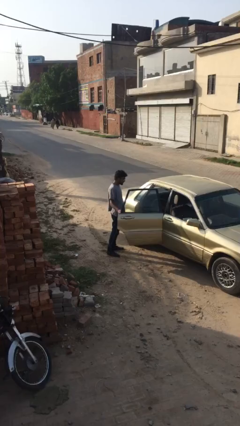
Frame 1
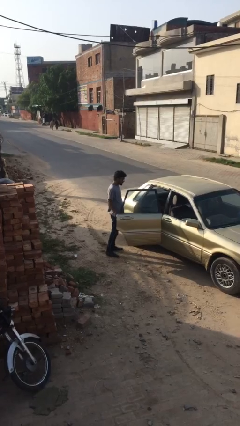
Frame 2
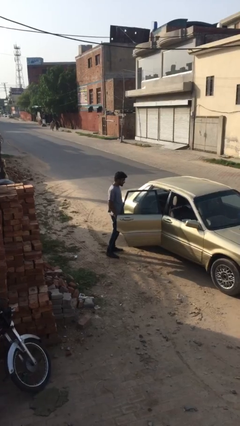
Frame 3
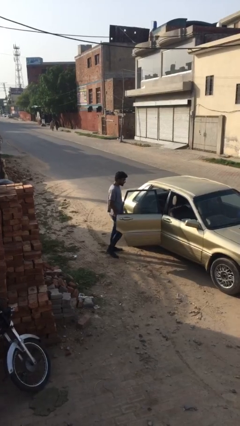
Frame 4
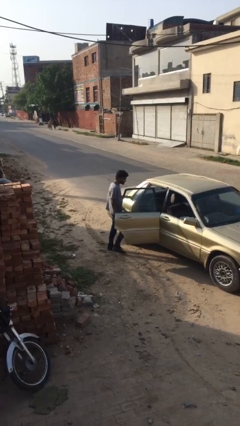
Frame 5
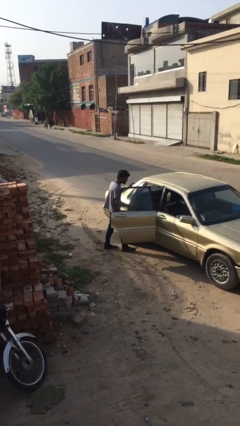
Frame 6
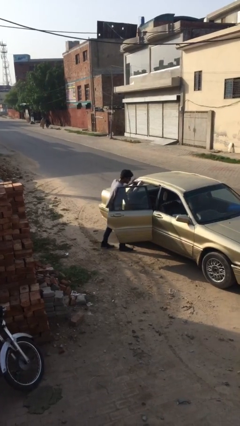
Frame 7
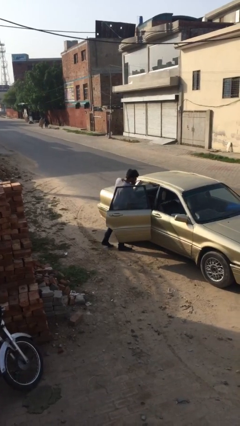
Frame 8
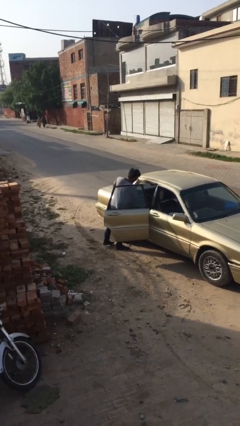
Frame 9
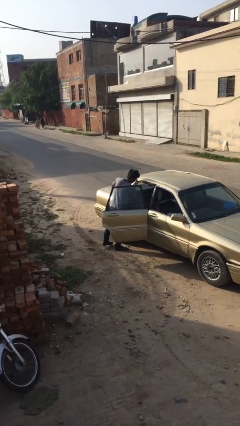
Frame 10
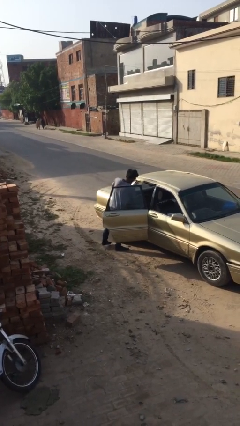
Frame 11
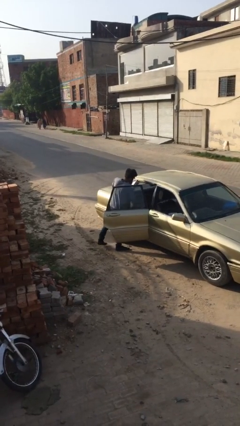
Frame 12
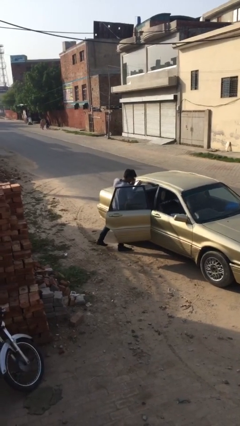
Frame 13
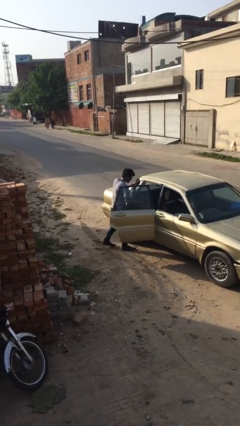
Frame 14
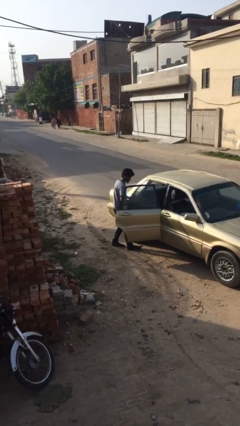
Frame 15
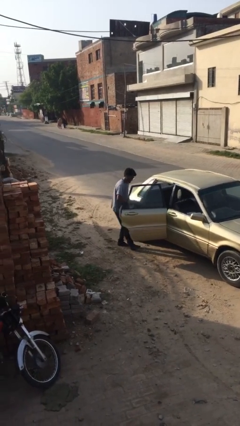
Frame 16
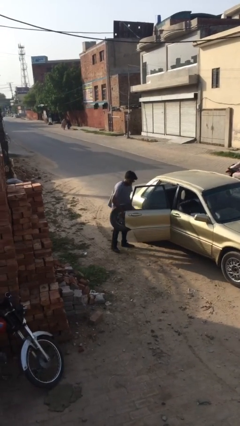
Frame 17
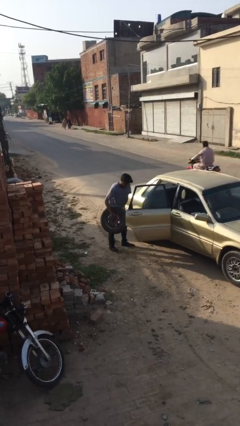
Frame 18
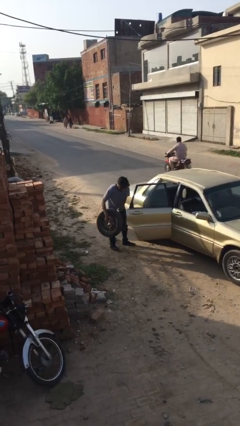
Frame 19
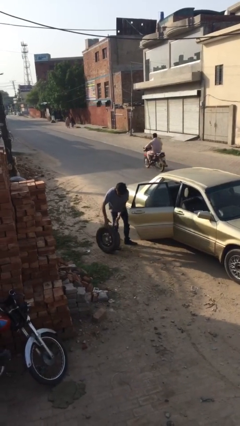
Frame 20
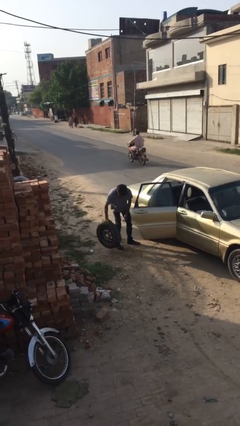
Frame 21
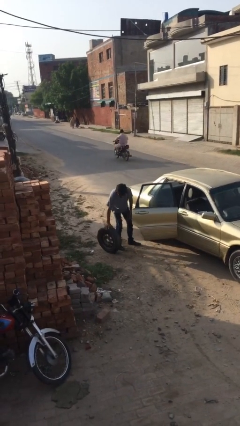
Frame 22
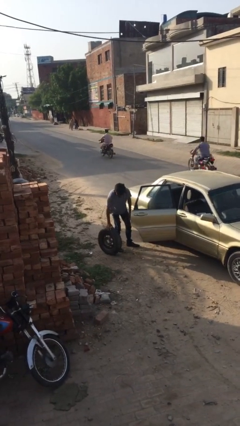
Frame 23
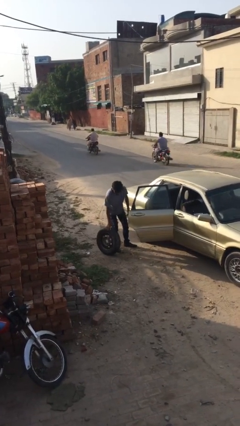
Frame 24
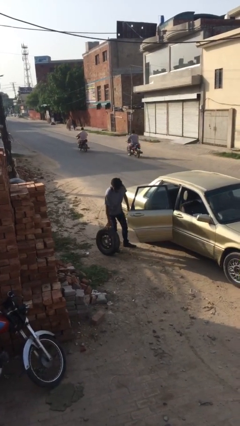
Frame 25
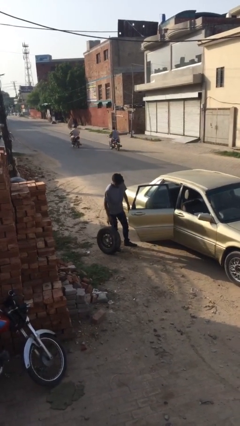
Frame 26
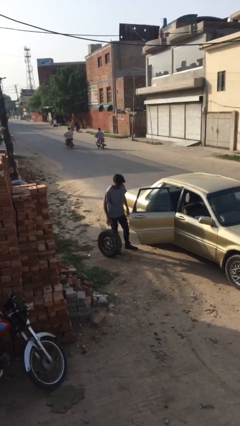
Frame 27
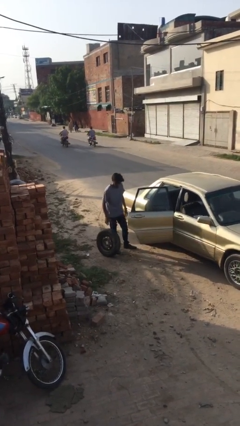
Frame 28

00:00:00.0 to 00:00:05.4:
person unloads car

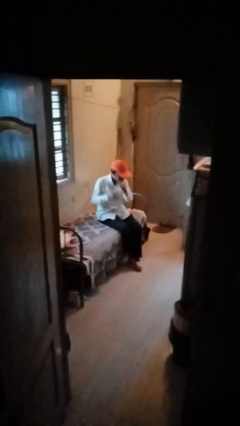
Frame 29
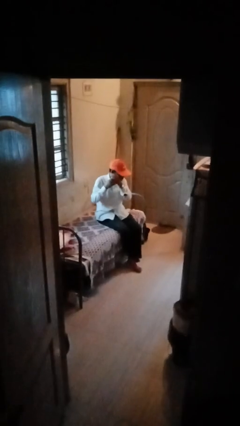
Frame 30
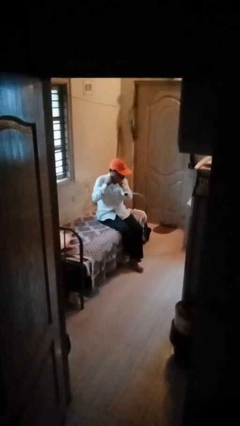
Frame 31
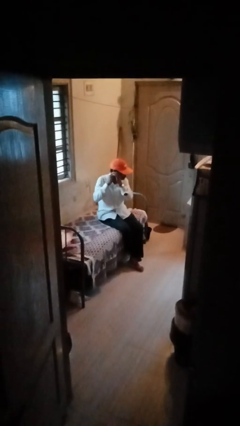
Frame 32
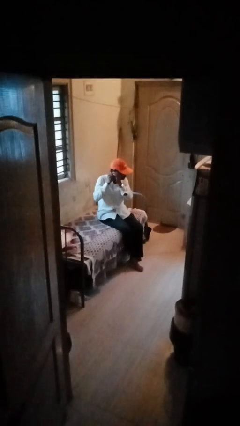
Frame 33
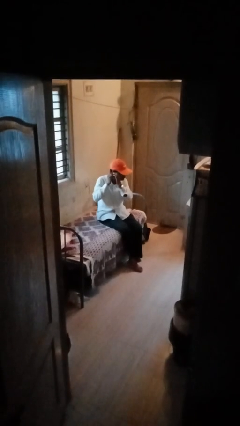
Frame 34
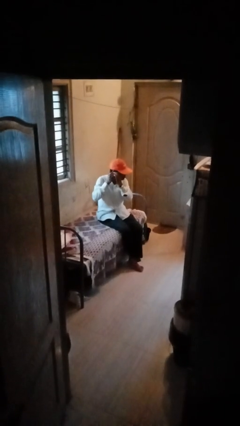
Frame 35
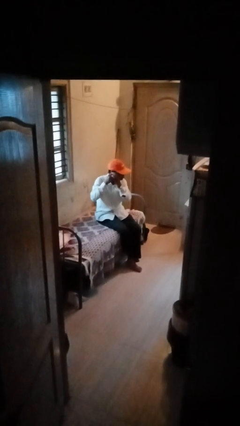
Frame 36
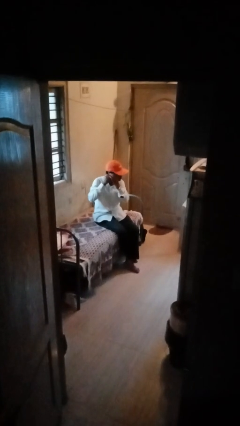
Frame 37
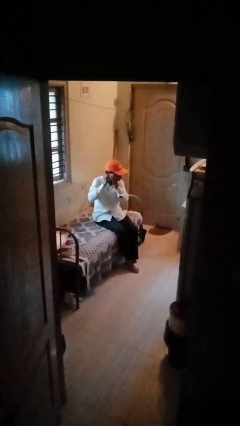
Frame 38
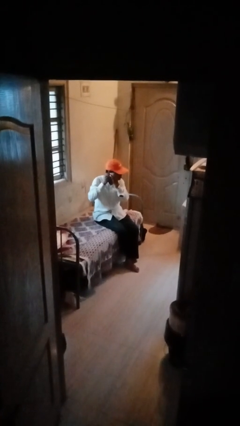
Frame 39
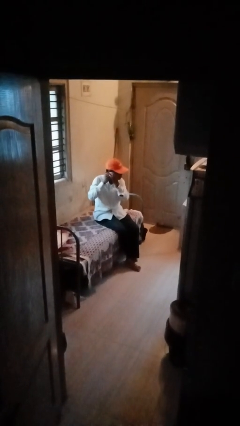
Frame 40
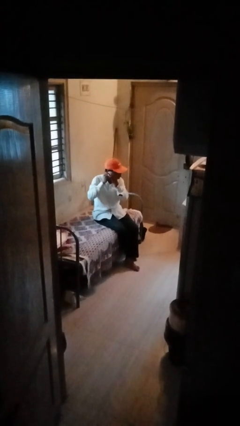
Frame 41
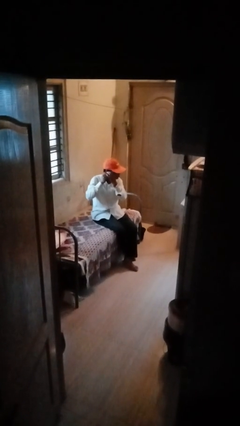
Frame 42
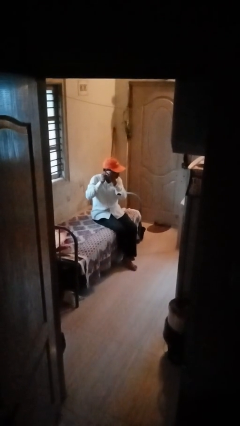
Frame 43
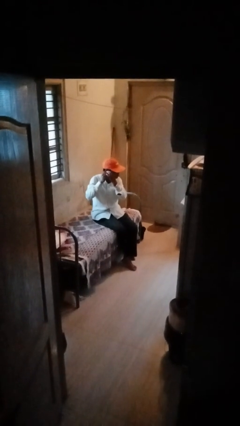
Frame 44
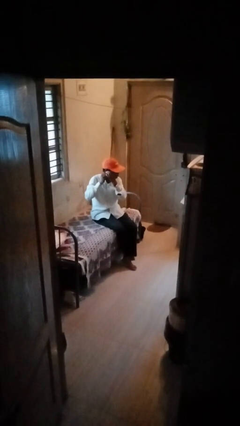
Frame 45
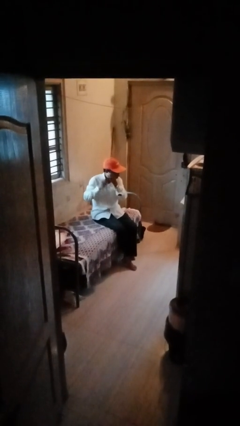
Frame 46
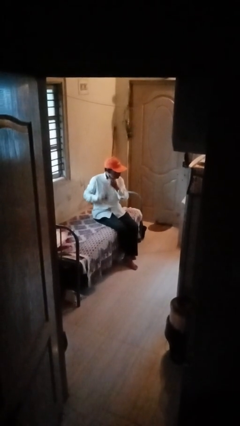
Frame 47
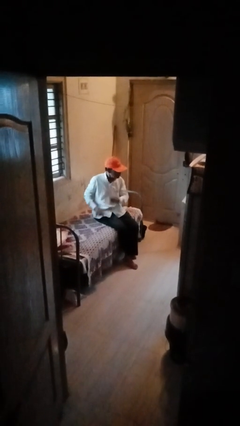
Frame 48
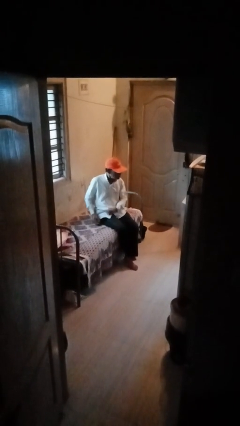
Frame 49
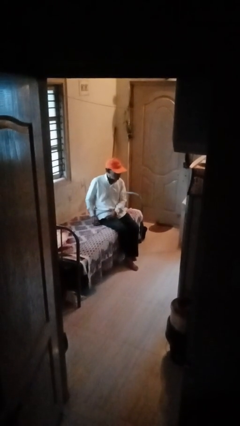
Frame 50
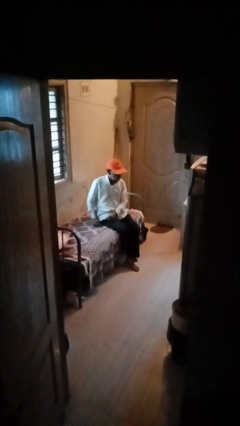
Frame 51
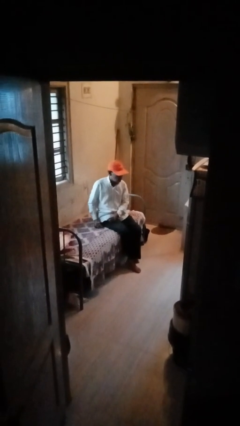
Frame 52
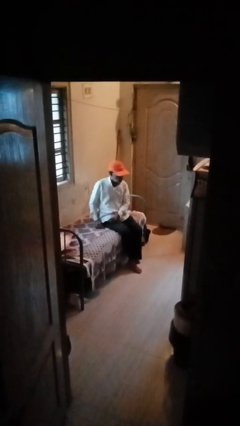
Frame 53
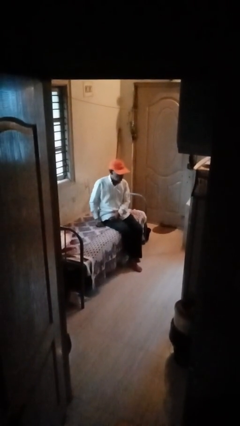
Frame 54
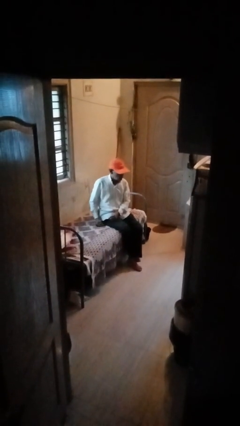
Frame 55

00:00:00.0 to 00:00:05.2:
person puts on earrings

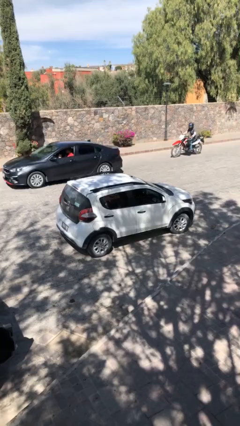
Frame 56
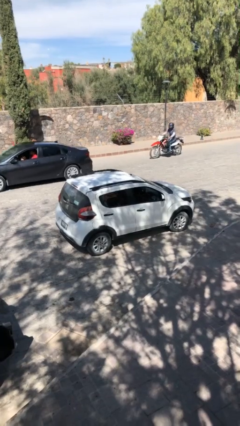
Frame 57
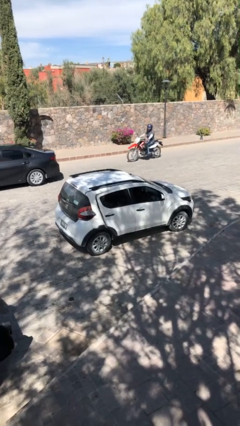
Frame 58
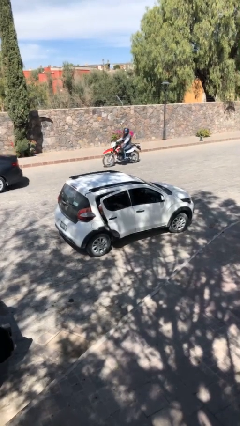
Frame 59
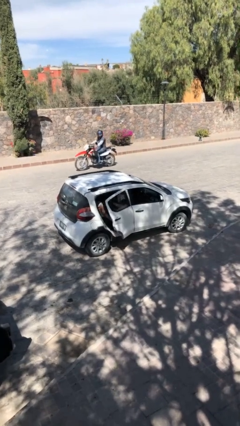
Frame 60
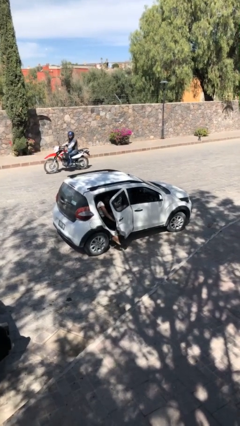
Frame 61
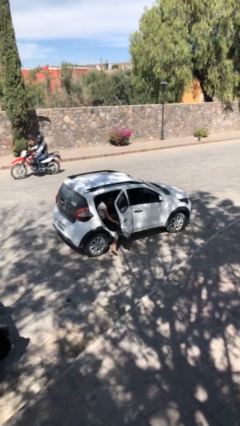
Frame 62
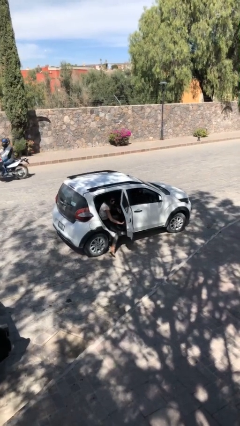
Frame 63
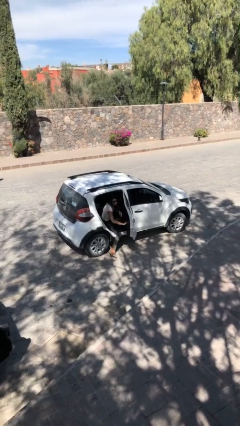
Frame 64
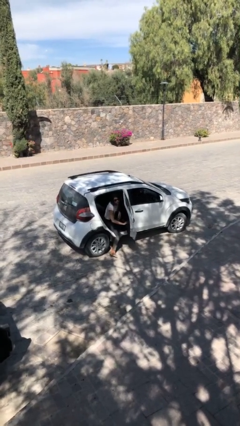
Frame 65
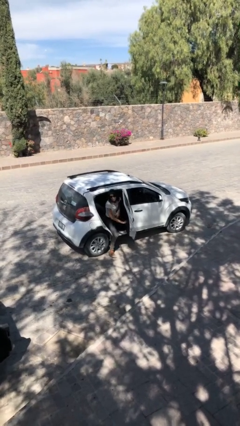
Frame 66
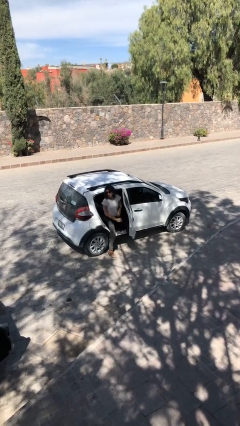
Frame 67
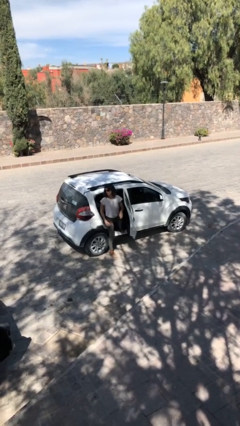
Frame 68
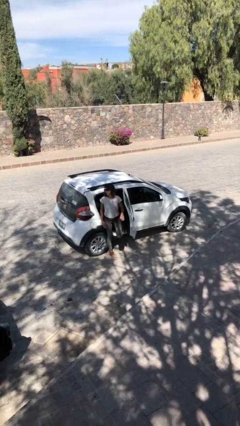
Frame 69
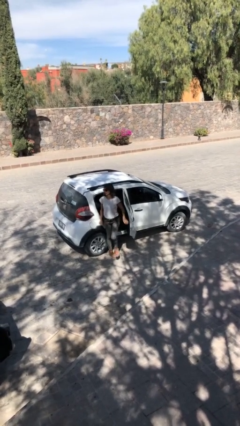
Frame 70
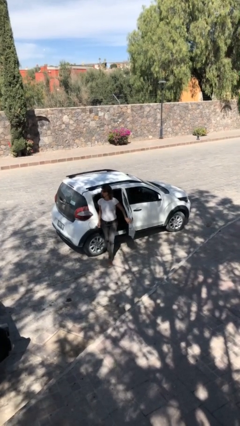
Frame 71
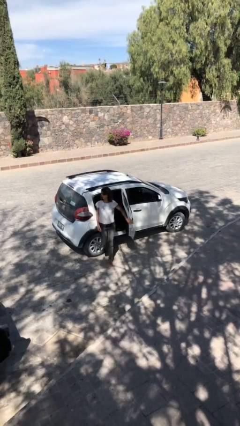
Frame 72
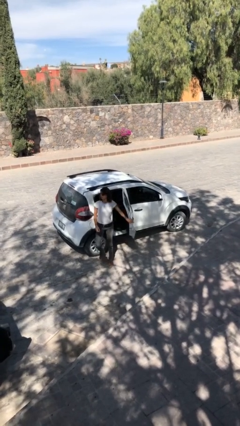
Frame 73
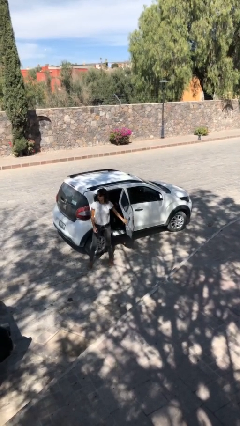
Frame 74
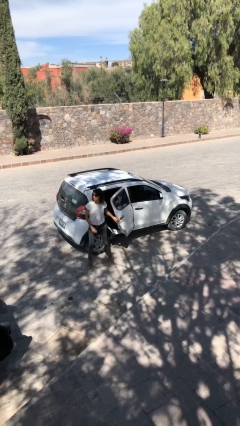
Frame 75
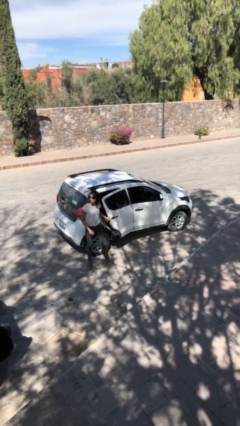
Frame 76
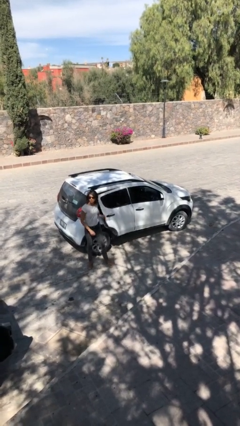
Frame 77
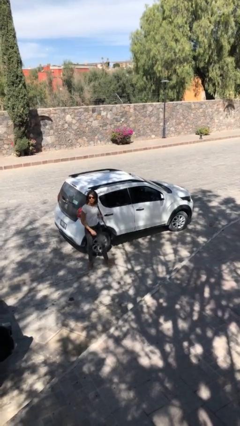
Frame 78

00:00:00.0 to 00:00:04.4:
car drops off person

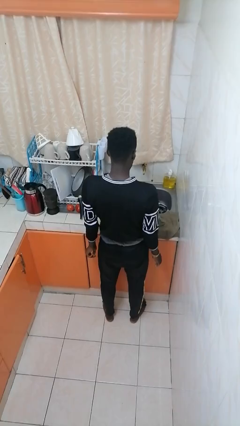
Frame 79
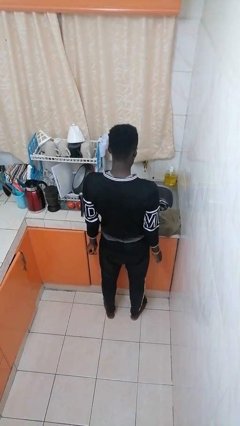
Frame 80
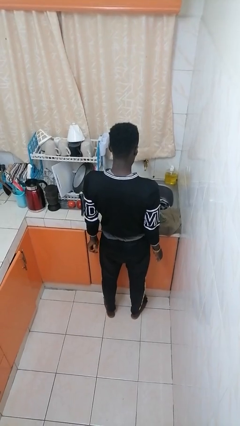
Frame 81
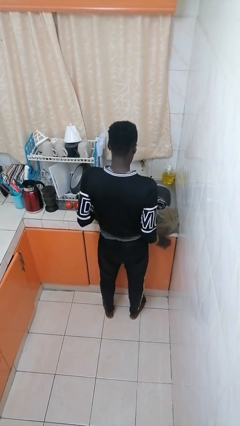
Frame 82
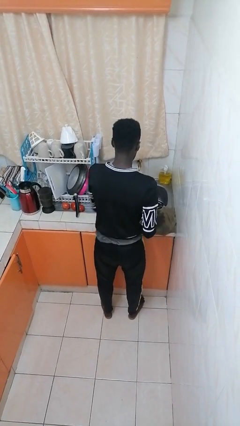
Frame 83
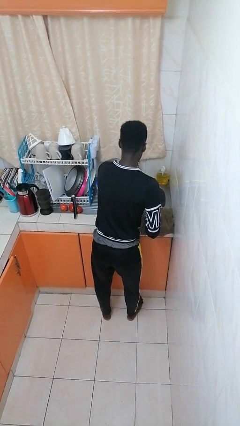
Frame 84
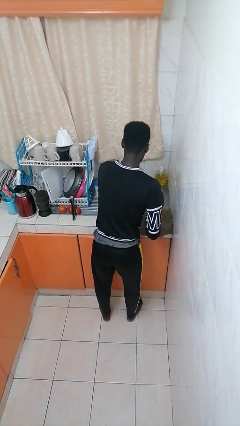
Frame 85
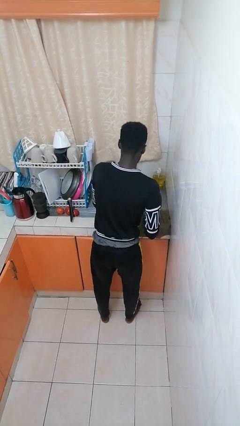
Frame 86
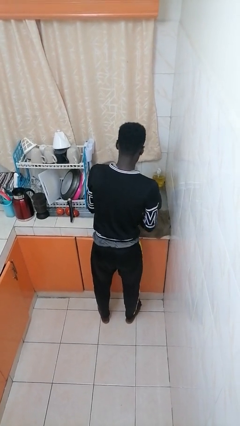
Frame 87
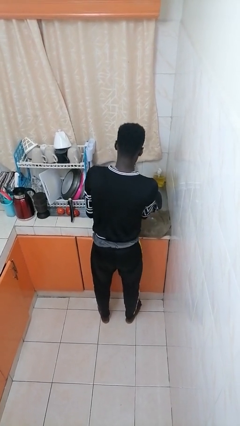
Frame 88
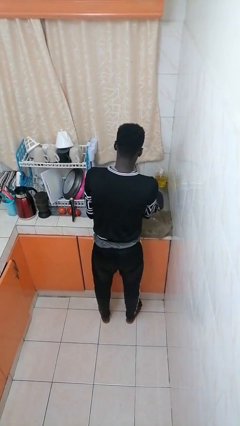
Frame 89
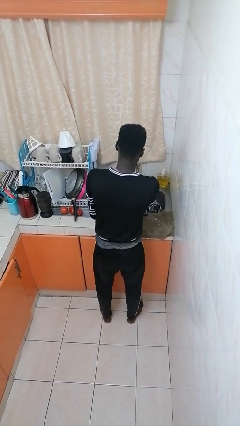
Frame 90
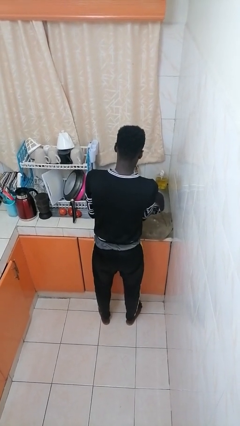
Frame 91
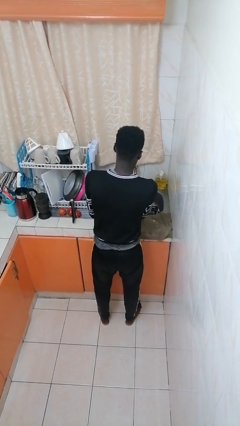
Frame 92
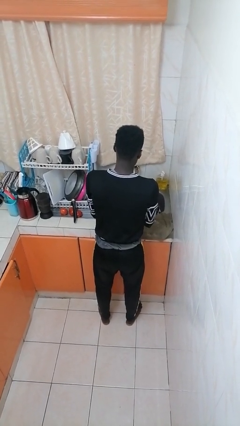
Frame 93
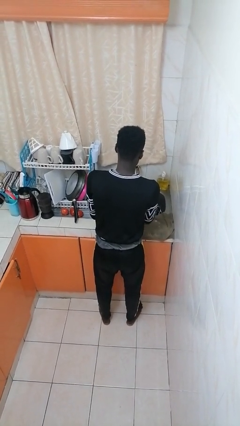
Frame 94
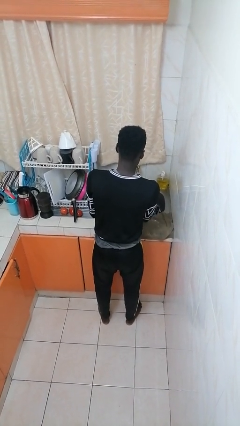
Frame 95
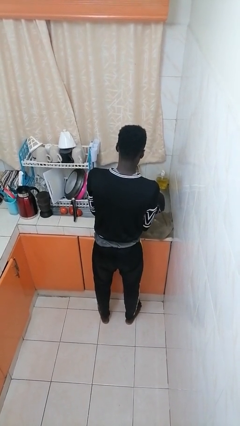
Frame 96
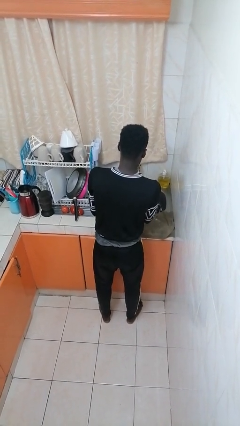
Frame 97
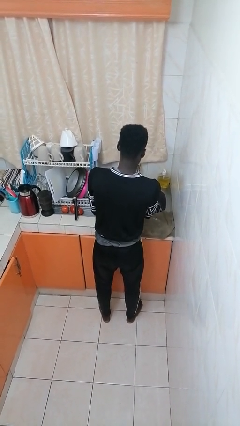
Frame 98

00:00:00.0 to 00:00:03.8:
person washes dish
